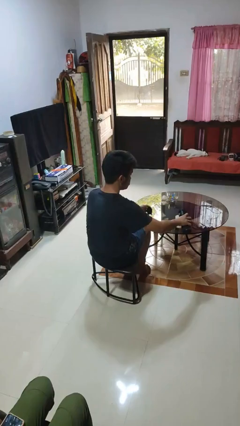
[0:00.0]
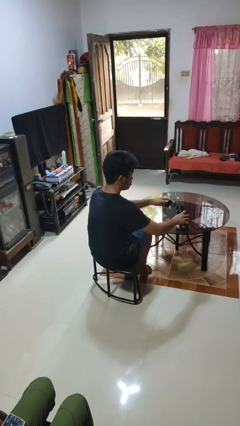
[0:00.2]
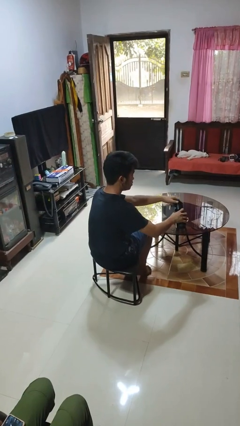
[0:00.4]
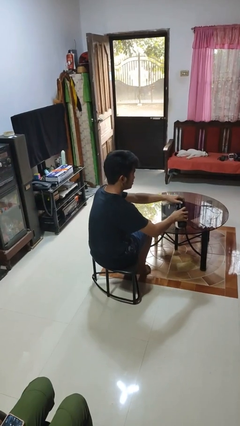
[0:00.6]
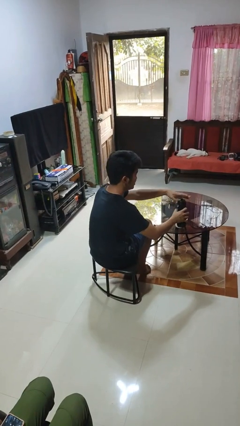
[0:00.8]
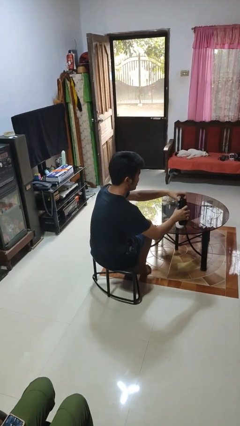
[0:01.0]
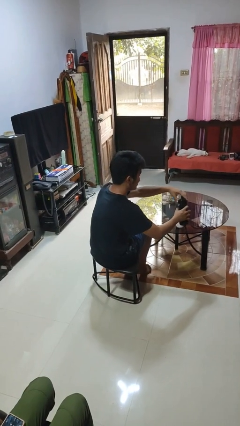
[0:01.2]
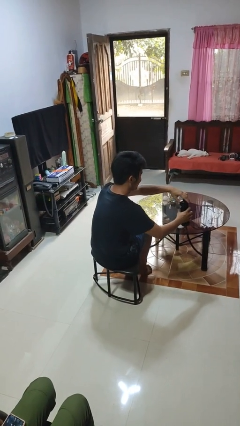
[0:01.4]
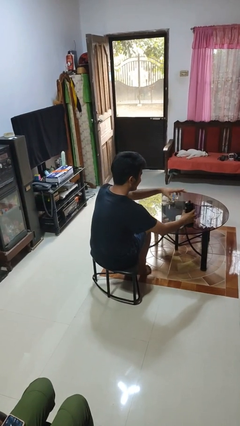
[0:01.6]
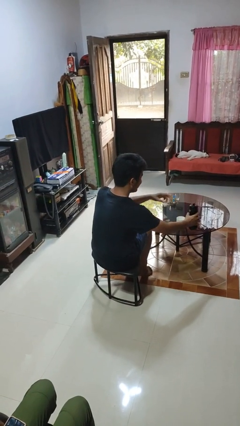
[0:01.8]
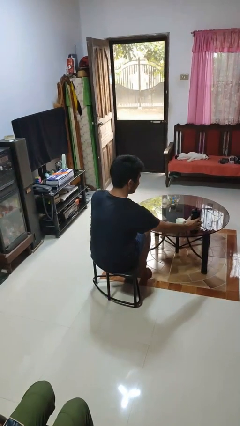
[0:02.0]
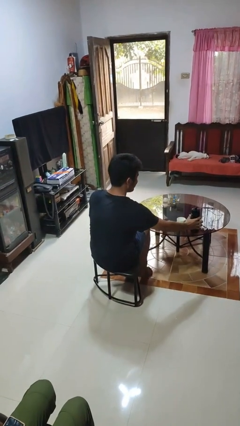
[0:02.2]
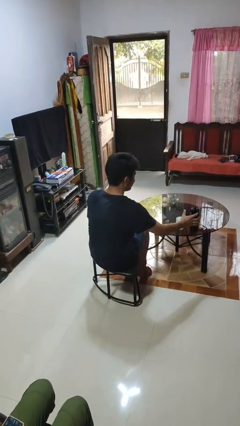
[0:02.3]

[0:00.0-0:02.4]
person screws lid to bottle

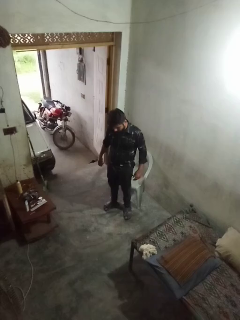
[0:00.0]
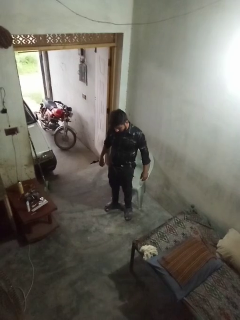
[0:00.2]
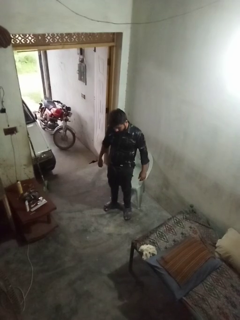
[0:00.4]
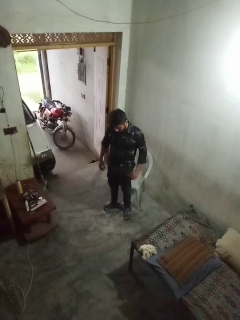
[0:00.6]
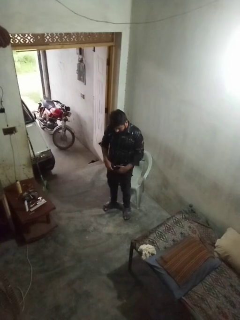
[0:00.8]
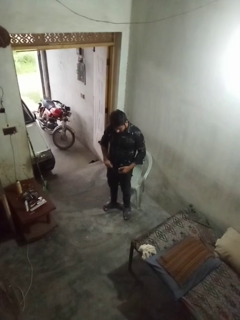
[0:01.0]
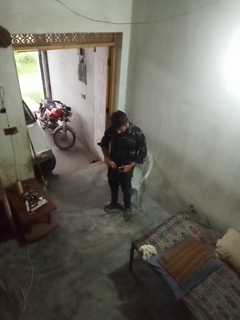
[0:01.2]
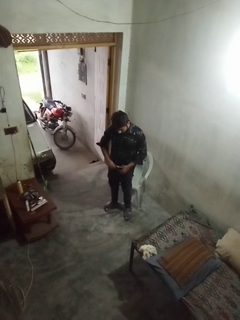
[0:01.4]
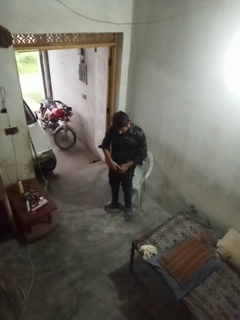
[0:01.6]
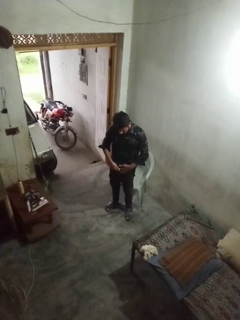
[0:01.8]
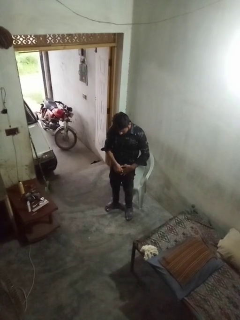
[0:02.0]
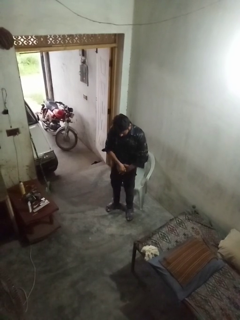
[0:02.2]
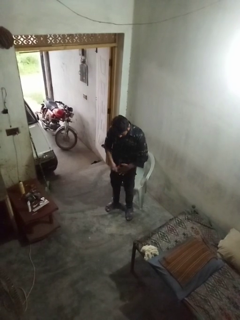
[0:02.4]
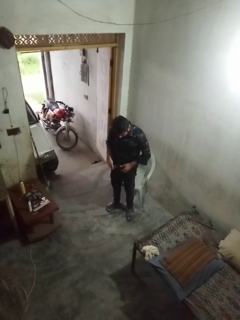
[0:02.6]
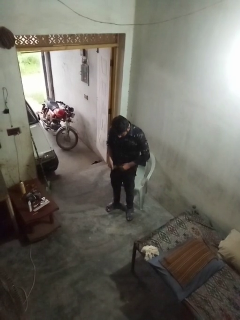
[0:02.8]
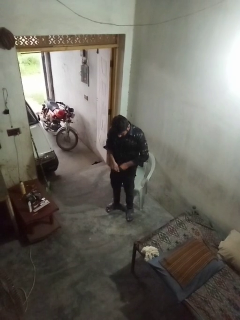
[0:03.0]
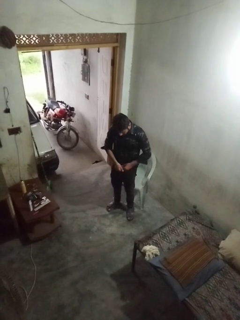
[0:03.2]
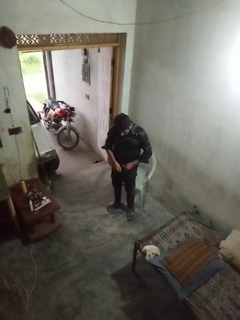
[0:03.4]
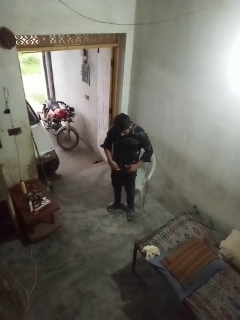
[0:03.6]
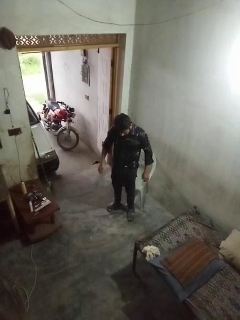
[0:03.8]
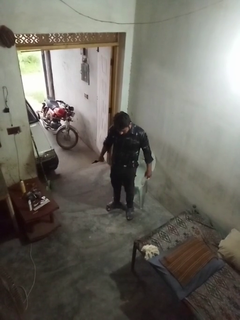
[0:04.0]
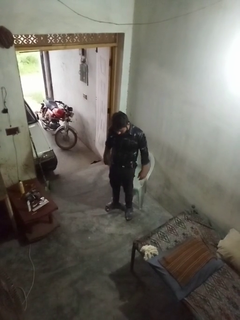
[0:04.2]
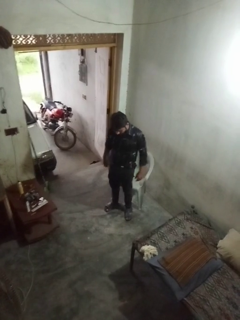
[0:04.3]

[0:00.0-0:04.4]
person puts on belt

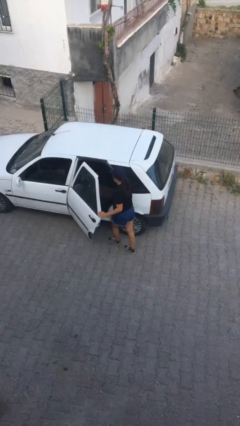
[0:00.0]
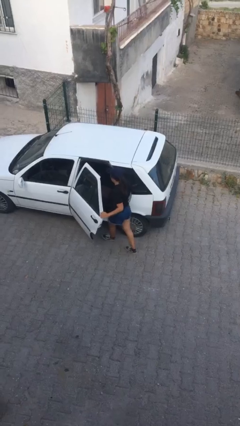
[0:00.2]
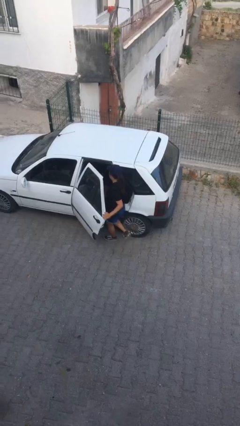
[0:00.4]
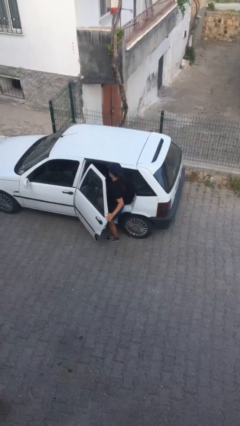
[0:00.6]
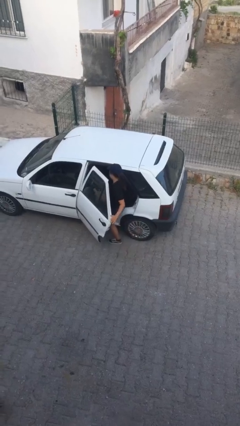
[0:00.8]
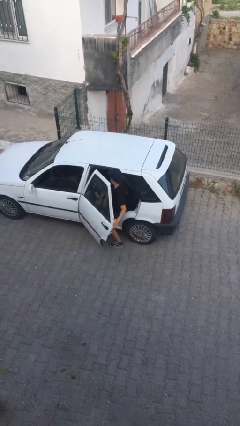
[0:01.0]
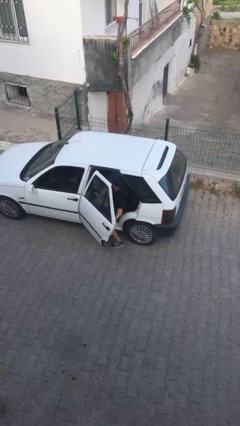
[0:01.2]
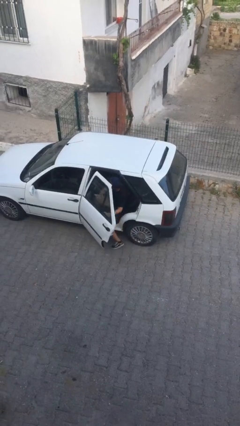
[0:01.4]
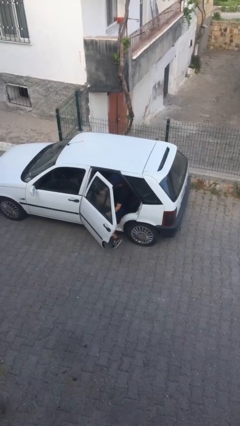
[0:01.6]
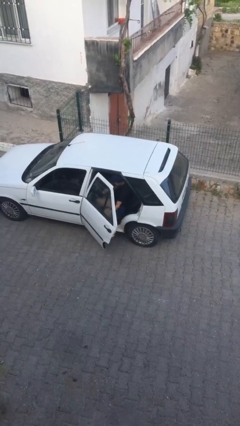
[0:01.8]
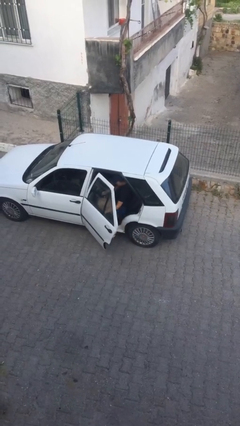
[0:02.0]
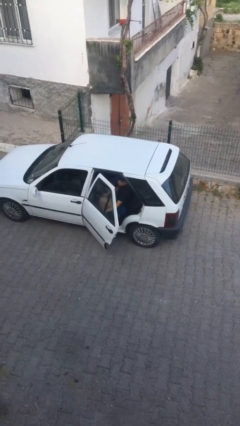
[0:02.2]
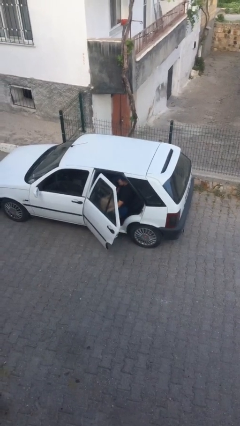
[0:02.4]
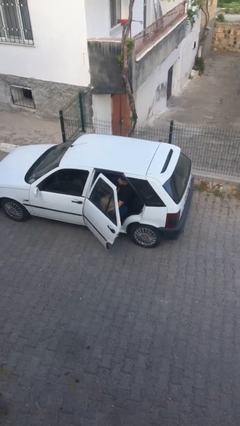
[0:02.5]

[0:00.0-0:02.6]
person enters car

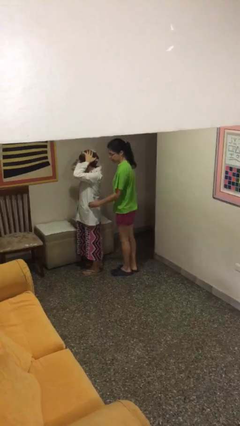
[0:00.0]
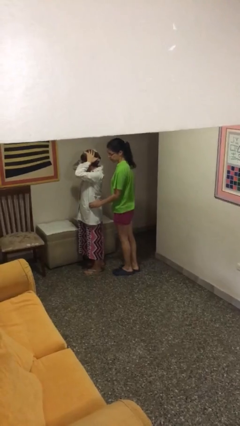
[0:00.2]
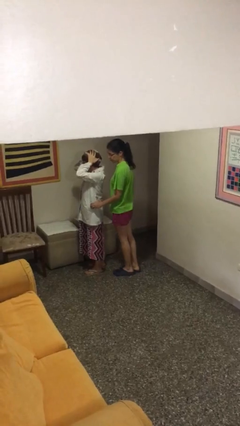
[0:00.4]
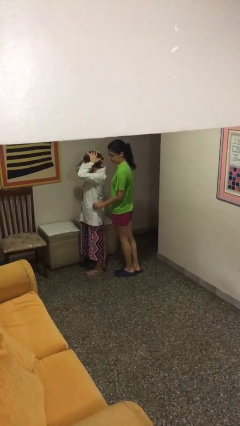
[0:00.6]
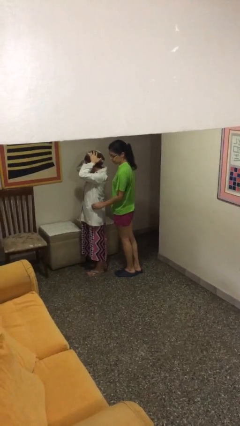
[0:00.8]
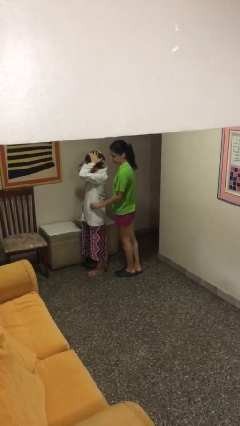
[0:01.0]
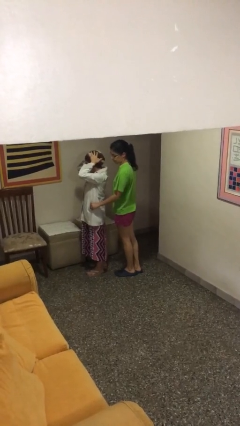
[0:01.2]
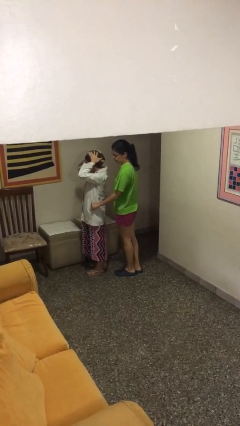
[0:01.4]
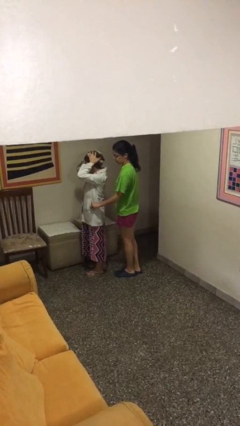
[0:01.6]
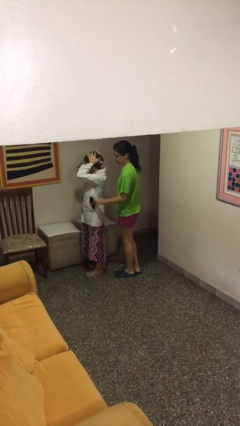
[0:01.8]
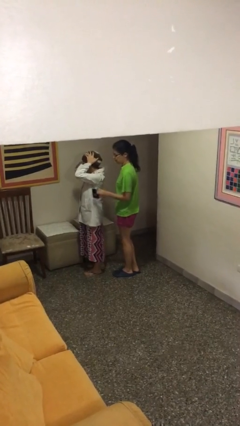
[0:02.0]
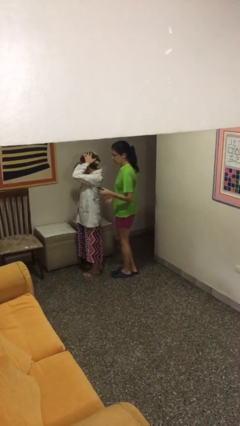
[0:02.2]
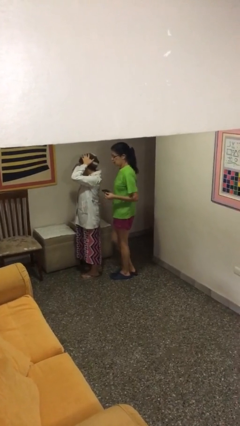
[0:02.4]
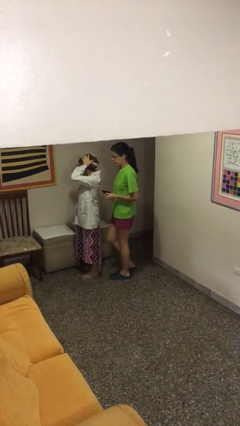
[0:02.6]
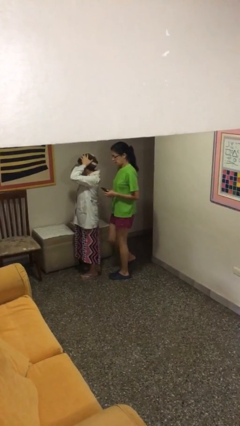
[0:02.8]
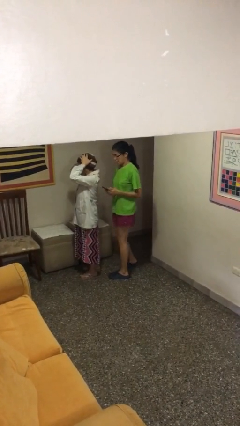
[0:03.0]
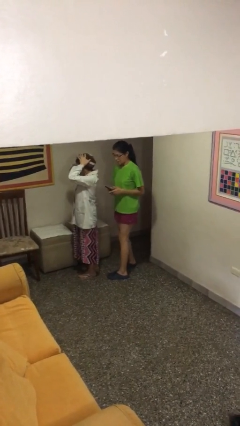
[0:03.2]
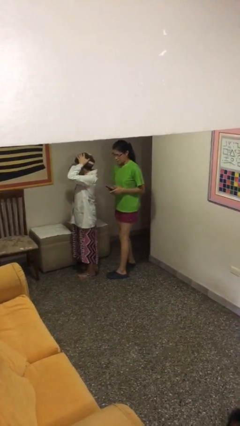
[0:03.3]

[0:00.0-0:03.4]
person steals object from person

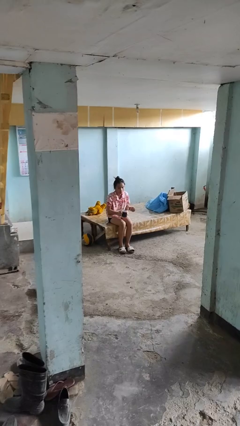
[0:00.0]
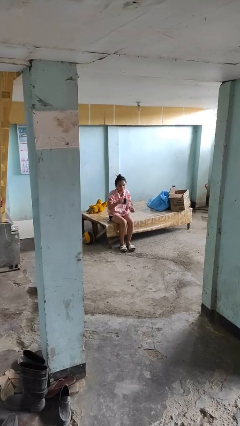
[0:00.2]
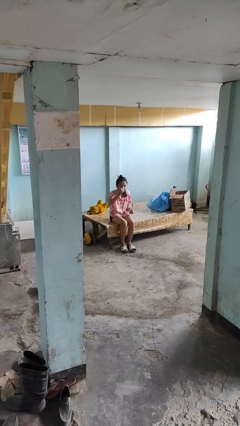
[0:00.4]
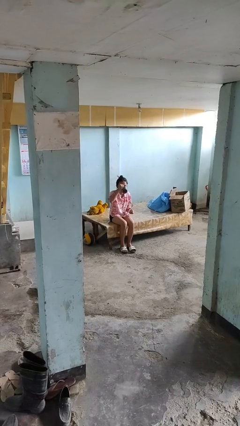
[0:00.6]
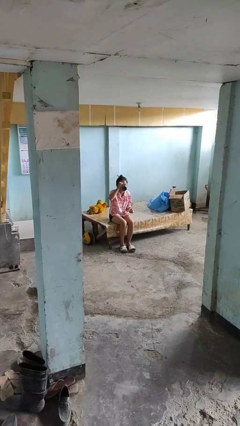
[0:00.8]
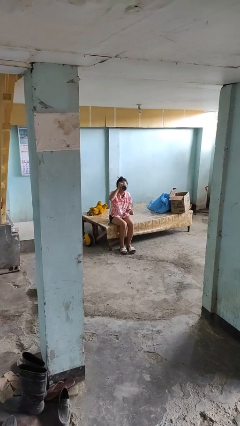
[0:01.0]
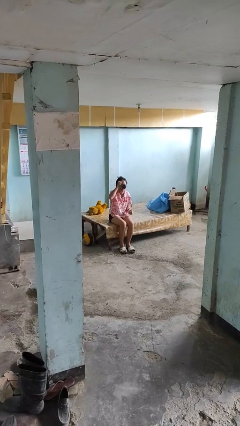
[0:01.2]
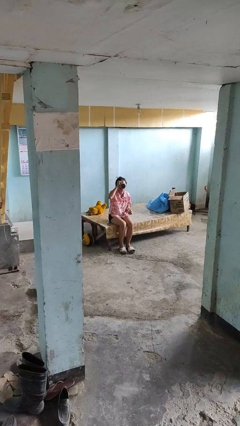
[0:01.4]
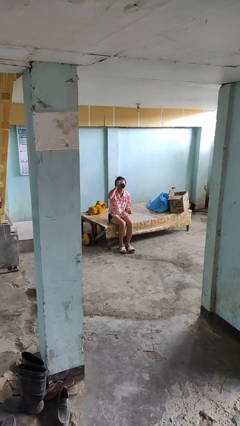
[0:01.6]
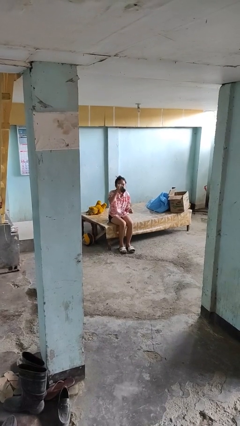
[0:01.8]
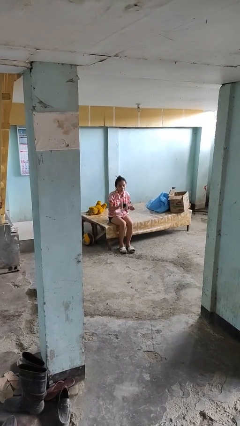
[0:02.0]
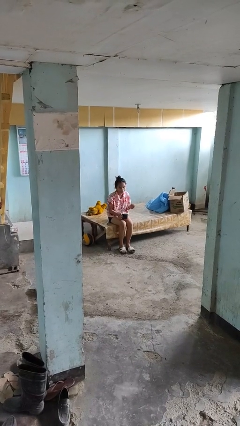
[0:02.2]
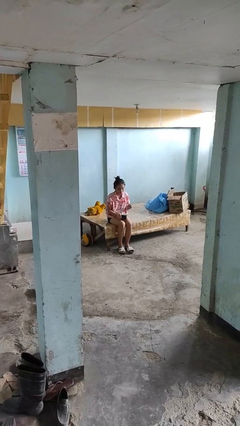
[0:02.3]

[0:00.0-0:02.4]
person drinks from mug

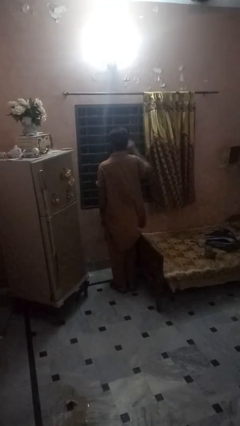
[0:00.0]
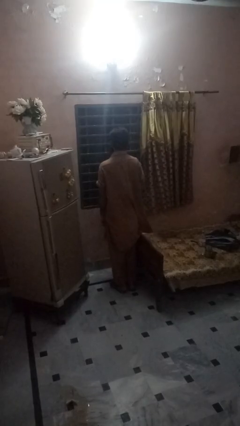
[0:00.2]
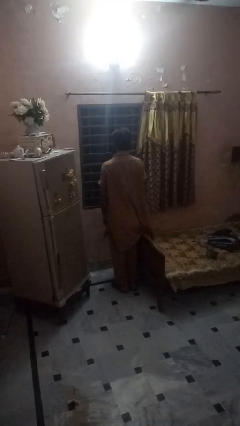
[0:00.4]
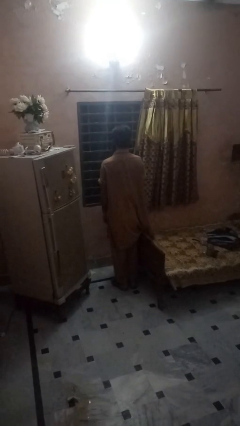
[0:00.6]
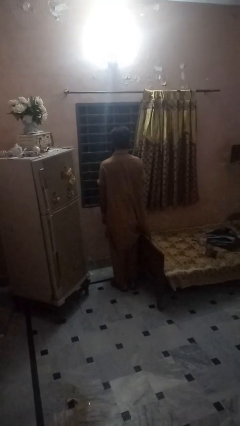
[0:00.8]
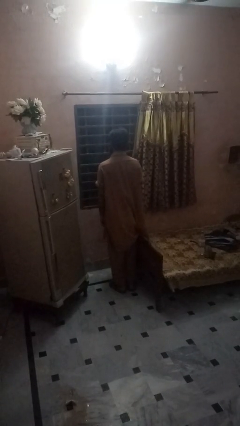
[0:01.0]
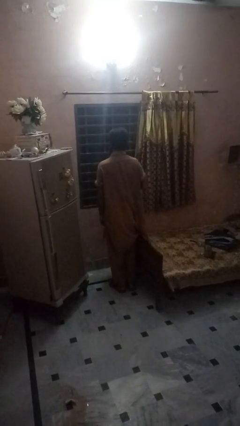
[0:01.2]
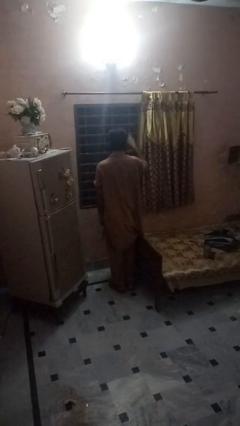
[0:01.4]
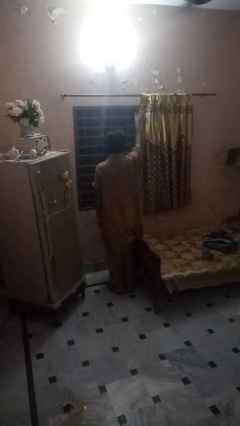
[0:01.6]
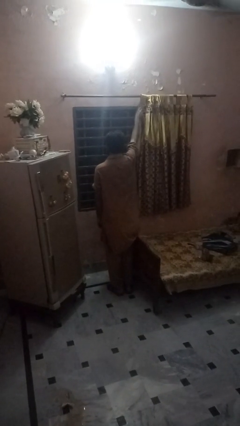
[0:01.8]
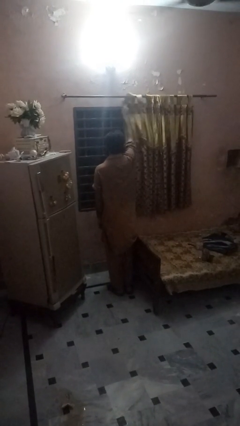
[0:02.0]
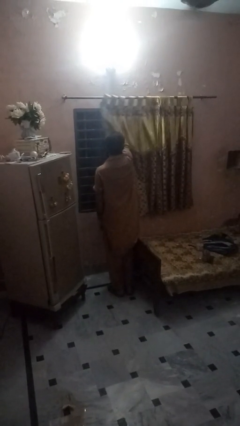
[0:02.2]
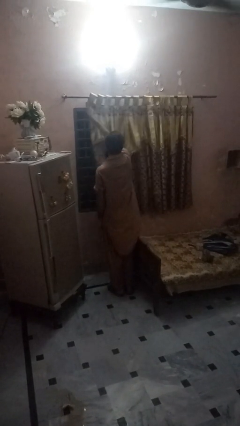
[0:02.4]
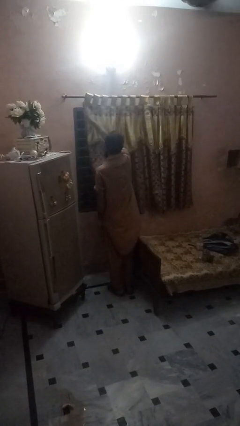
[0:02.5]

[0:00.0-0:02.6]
person closes curtains

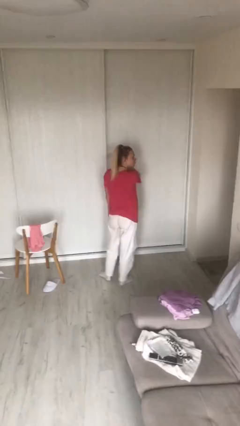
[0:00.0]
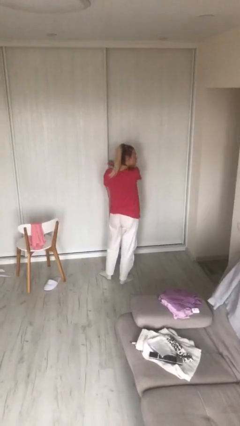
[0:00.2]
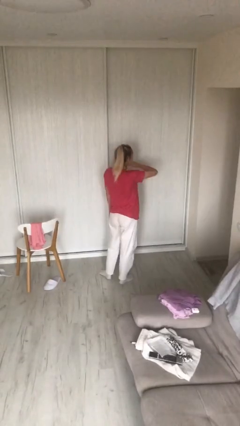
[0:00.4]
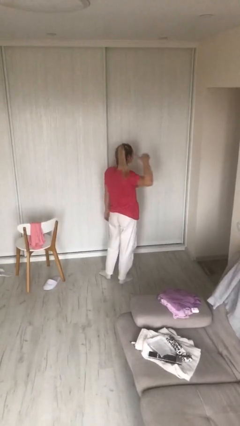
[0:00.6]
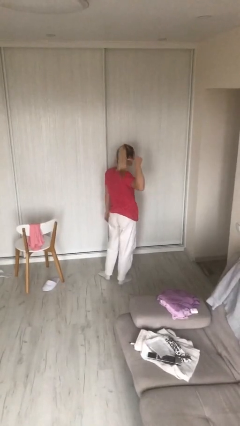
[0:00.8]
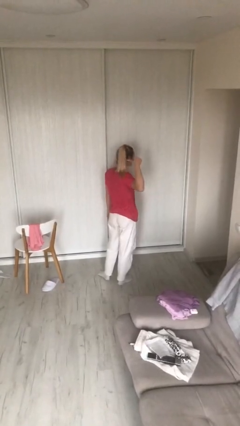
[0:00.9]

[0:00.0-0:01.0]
person gestures cut
